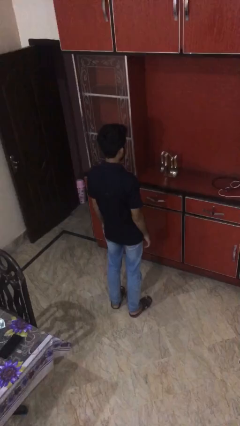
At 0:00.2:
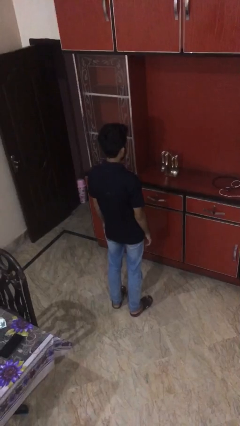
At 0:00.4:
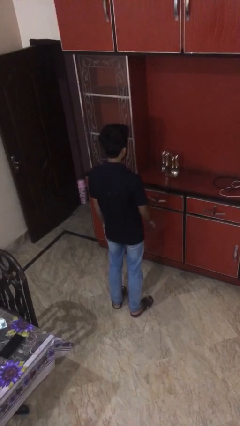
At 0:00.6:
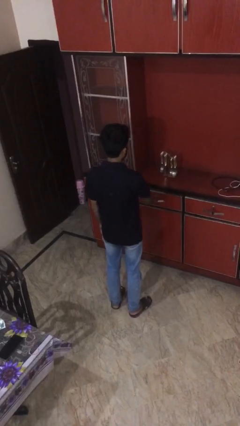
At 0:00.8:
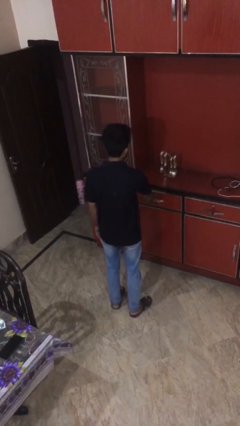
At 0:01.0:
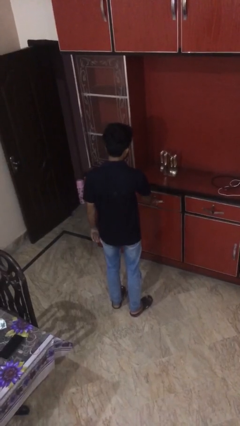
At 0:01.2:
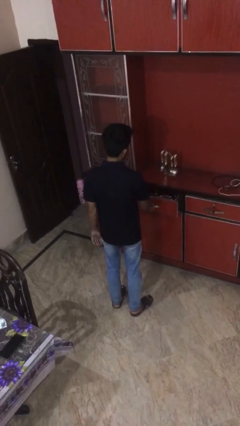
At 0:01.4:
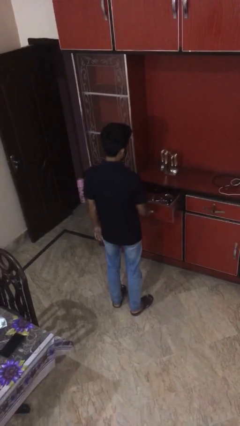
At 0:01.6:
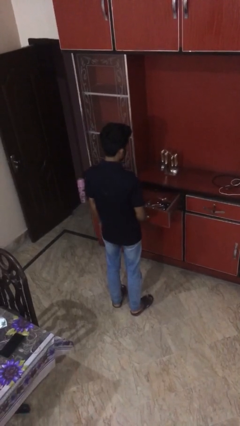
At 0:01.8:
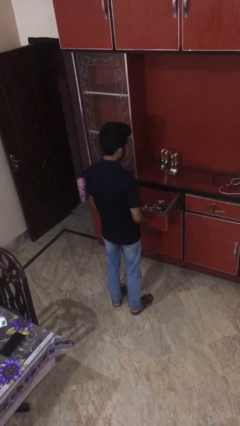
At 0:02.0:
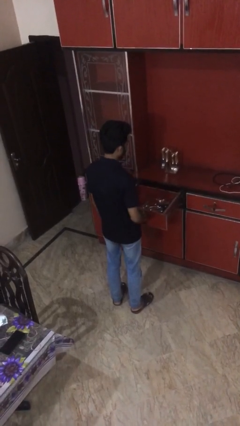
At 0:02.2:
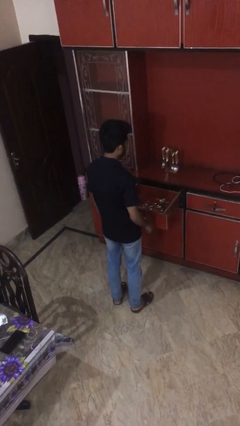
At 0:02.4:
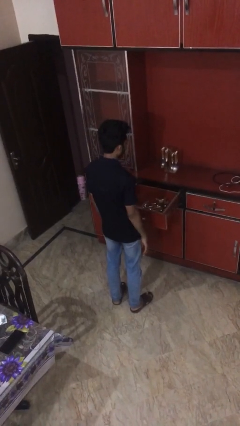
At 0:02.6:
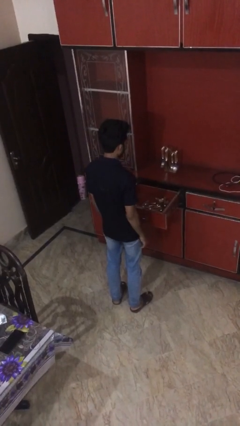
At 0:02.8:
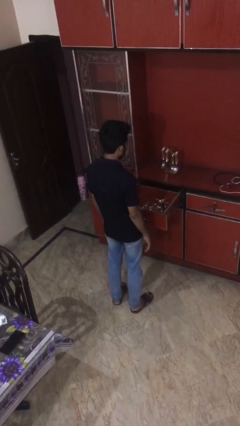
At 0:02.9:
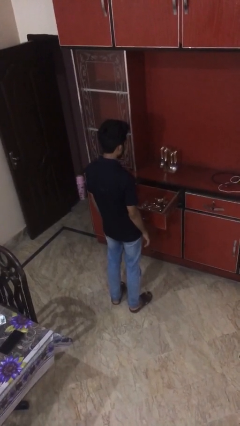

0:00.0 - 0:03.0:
person opens kitchen drawer

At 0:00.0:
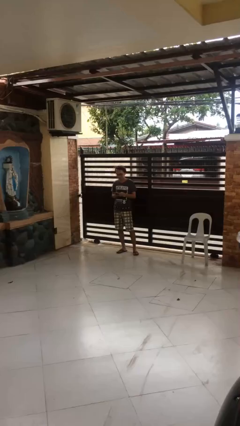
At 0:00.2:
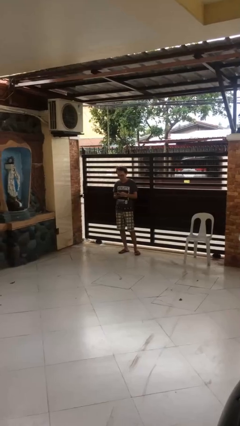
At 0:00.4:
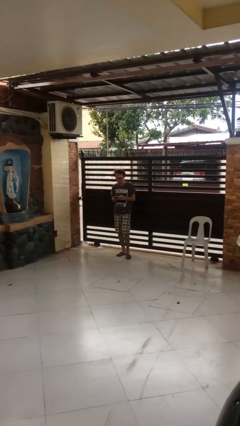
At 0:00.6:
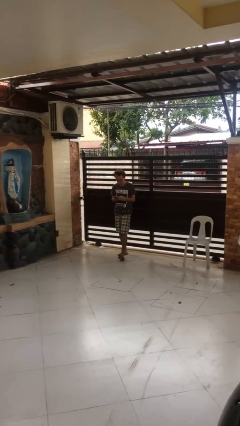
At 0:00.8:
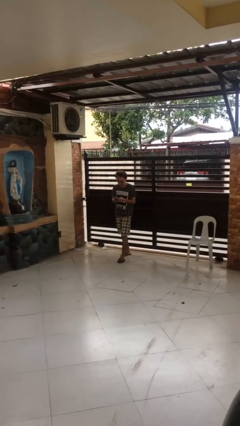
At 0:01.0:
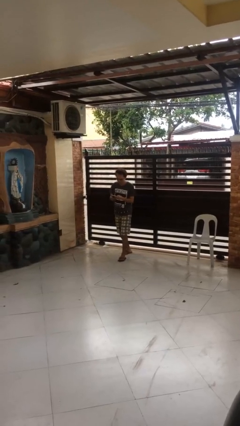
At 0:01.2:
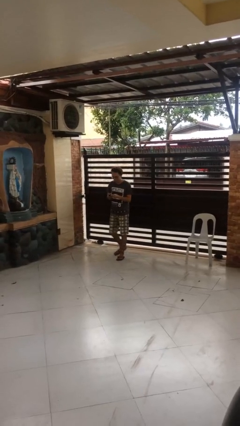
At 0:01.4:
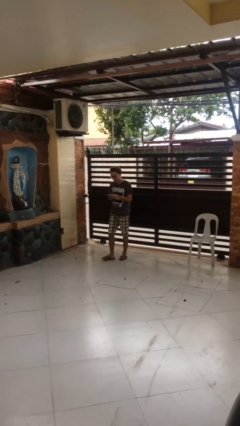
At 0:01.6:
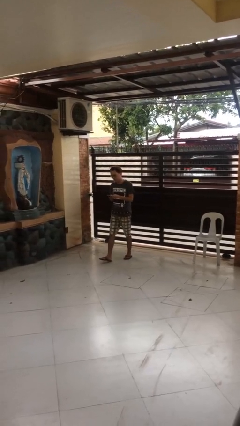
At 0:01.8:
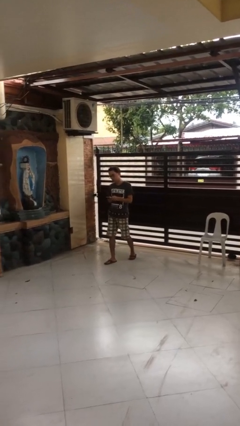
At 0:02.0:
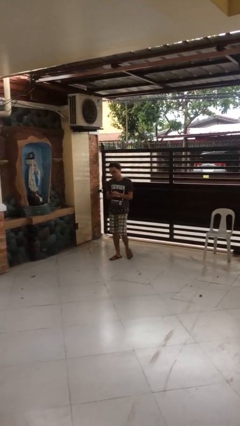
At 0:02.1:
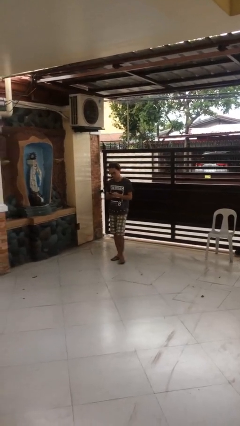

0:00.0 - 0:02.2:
person texts on phone

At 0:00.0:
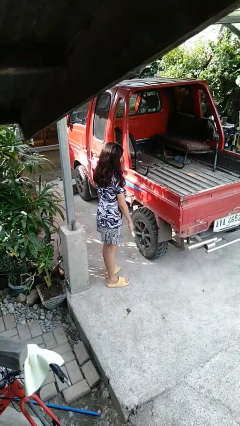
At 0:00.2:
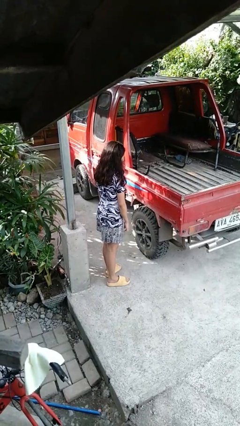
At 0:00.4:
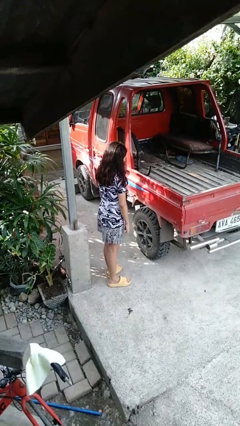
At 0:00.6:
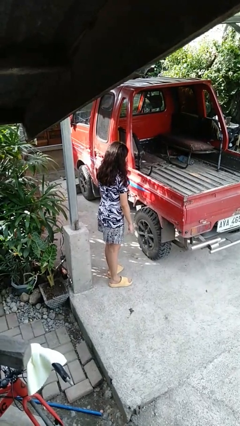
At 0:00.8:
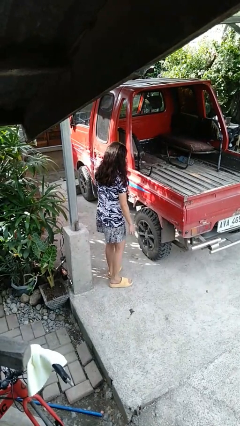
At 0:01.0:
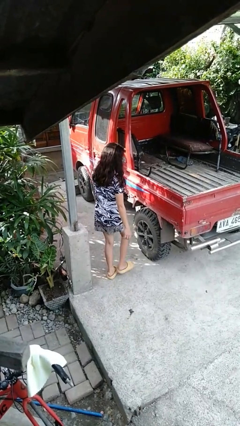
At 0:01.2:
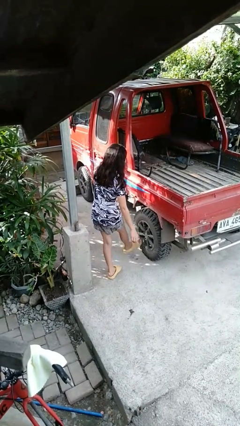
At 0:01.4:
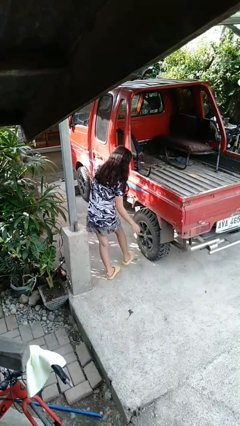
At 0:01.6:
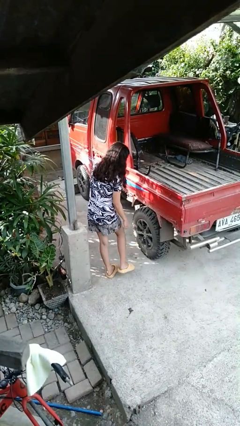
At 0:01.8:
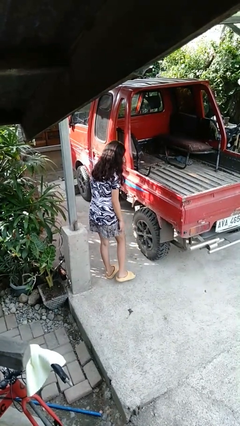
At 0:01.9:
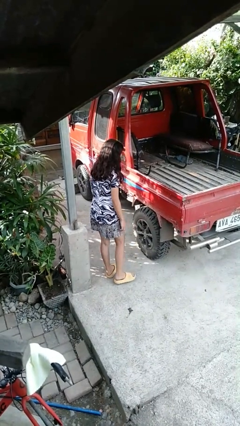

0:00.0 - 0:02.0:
person kicks car tires

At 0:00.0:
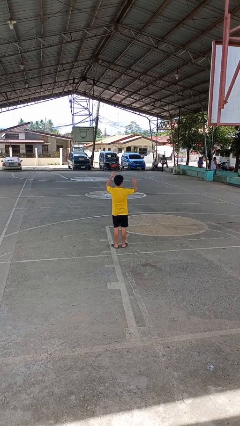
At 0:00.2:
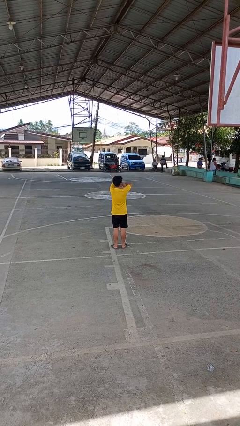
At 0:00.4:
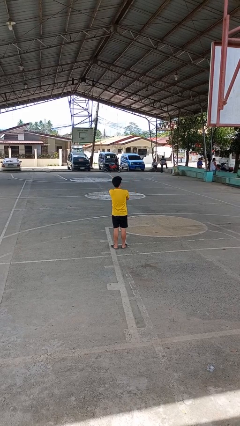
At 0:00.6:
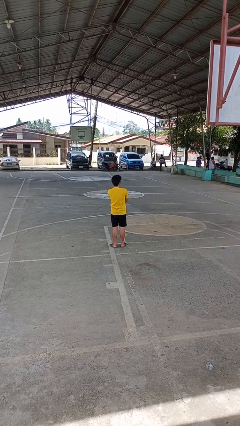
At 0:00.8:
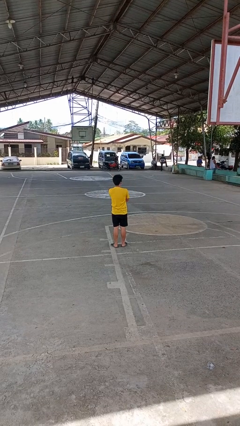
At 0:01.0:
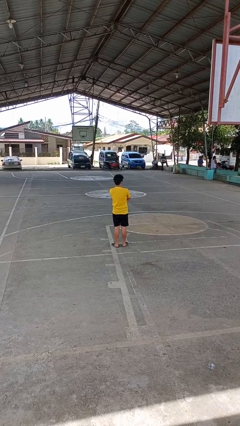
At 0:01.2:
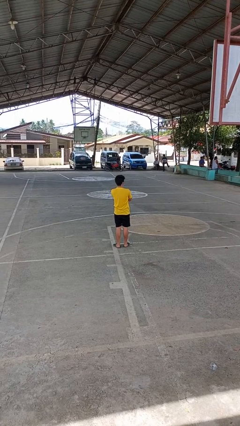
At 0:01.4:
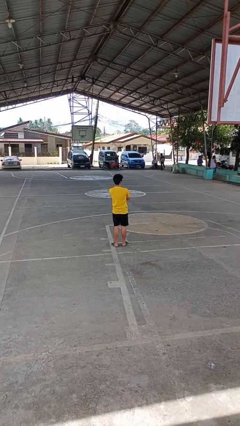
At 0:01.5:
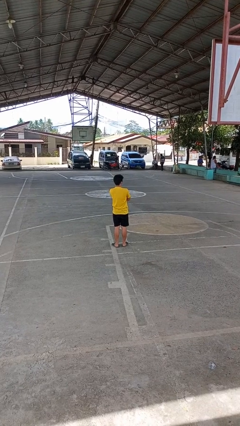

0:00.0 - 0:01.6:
person crosses arms

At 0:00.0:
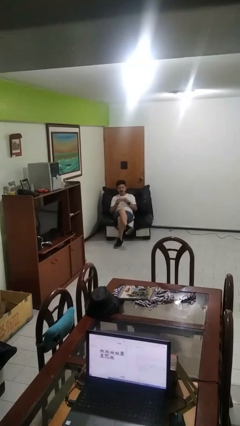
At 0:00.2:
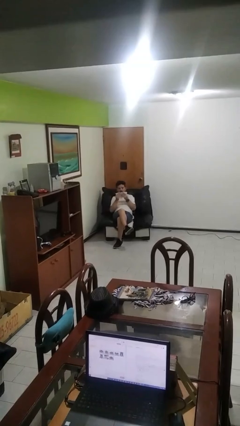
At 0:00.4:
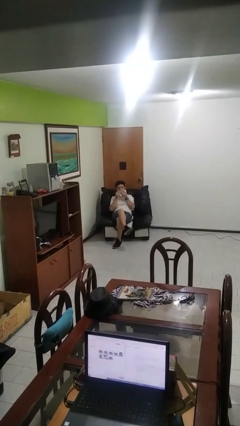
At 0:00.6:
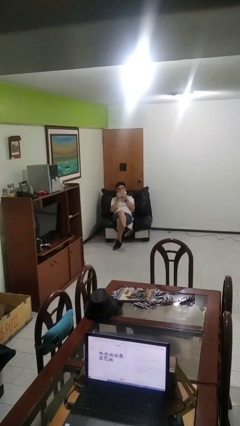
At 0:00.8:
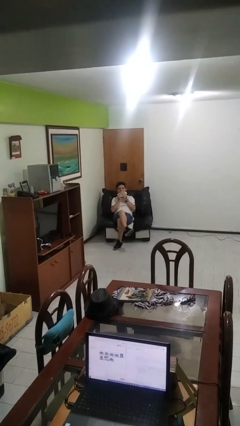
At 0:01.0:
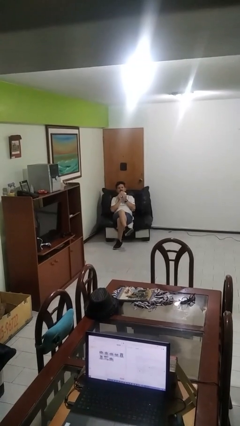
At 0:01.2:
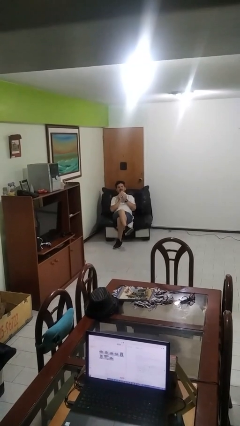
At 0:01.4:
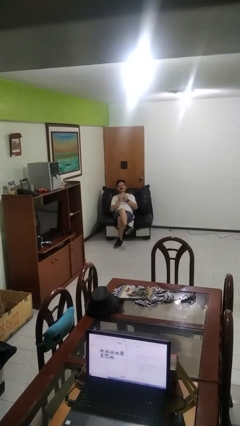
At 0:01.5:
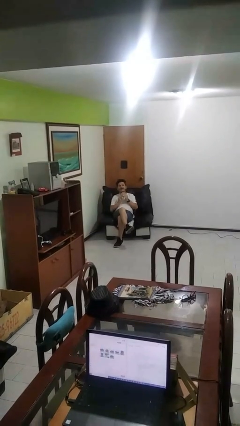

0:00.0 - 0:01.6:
person wipes mouth with napkin

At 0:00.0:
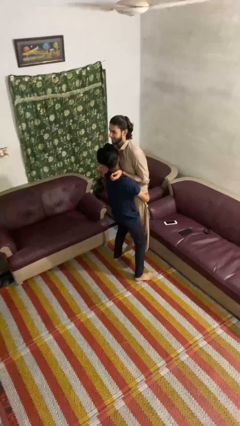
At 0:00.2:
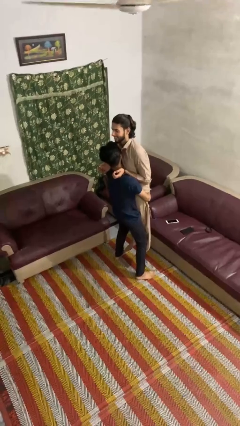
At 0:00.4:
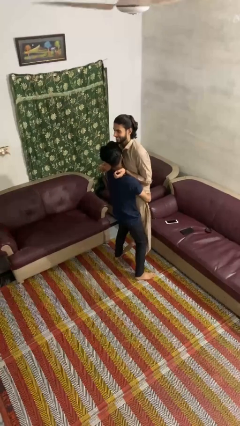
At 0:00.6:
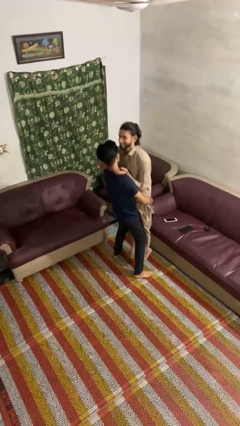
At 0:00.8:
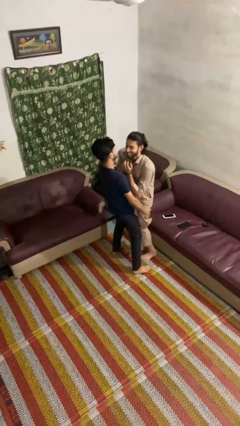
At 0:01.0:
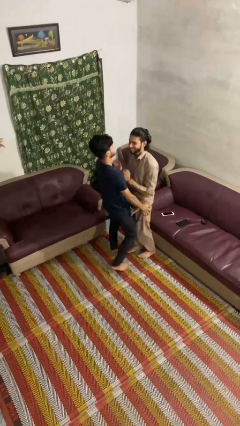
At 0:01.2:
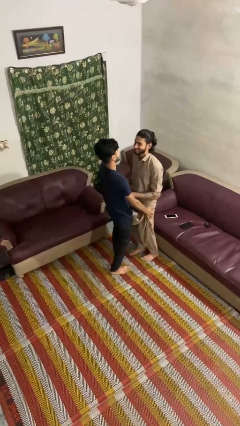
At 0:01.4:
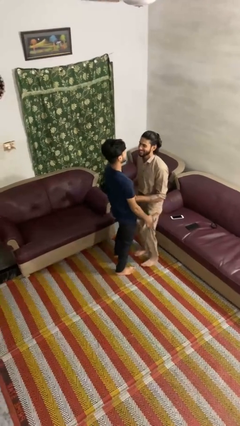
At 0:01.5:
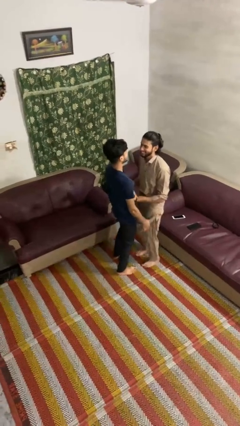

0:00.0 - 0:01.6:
person puts down person

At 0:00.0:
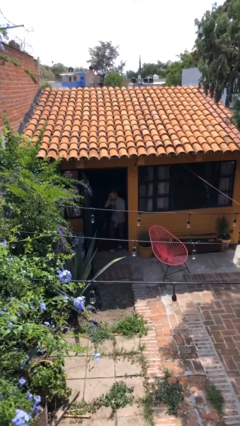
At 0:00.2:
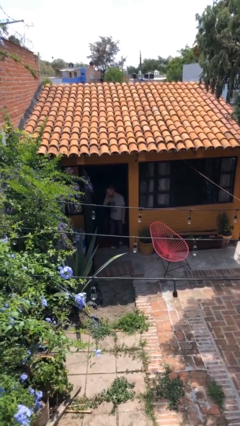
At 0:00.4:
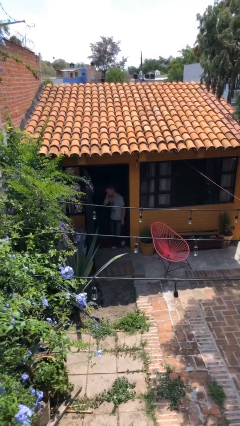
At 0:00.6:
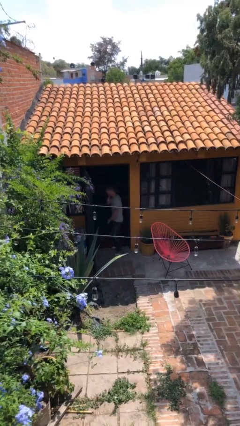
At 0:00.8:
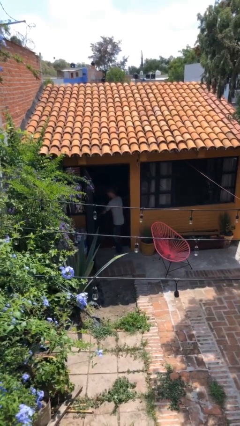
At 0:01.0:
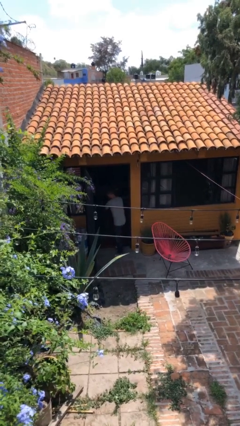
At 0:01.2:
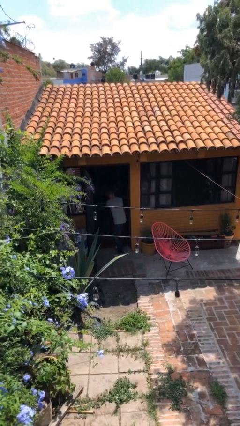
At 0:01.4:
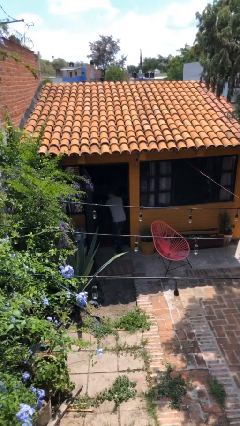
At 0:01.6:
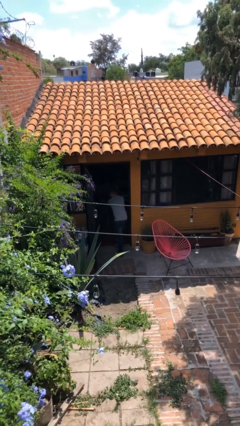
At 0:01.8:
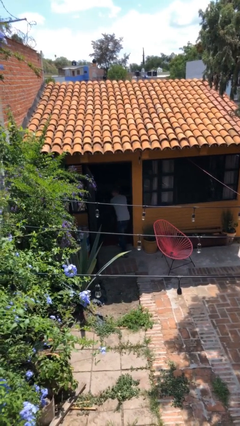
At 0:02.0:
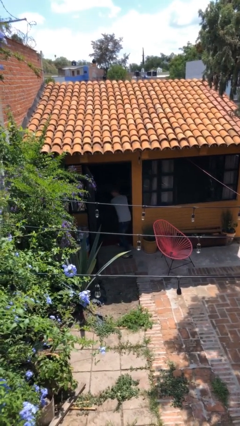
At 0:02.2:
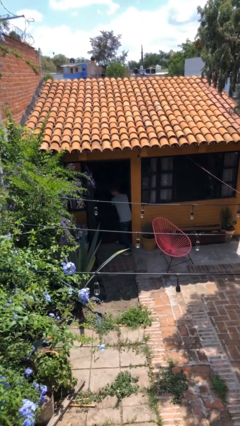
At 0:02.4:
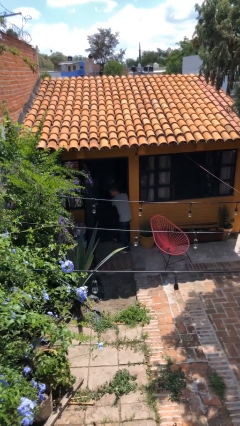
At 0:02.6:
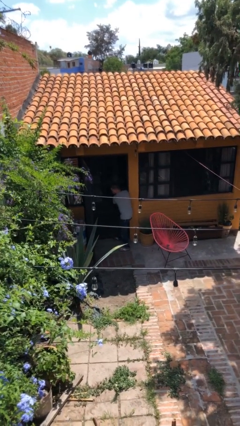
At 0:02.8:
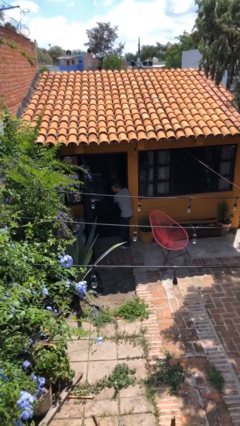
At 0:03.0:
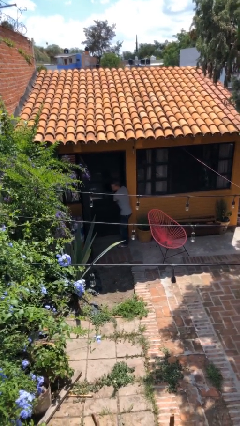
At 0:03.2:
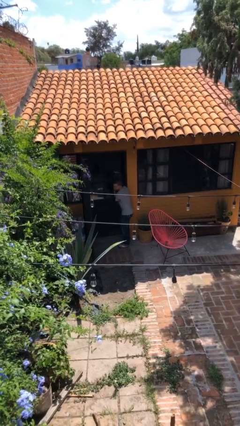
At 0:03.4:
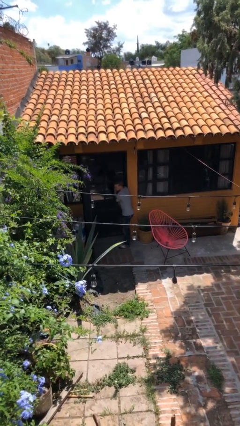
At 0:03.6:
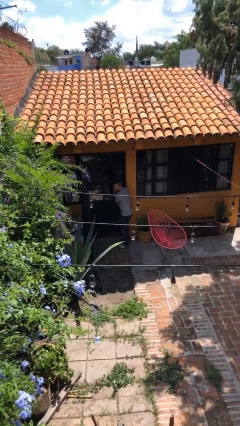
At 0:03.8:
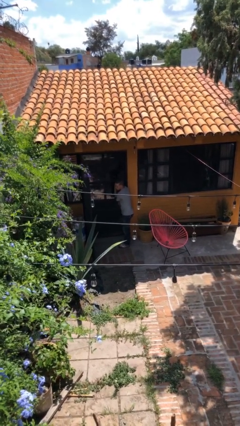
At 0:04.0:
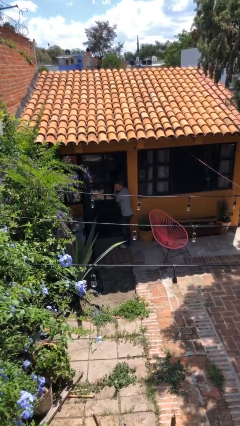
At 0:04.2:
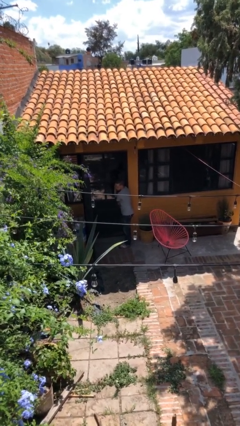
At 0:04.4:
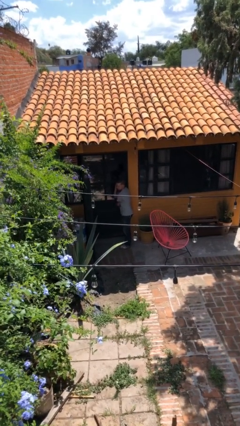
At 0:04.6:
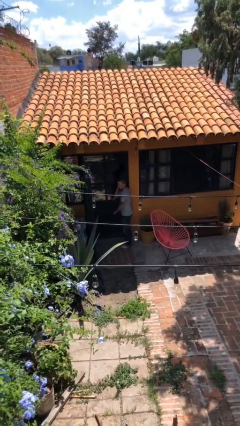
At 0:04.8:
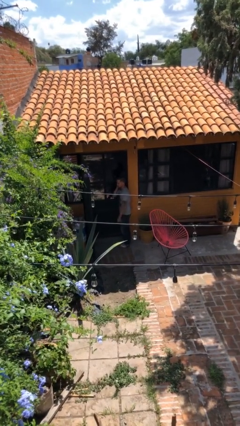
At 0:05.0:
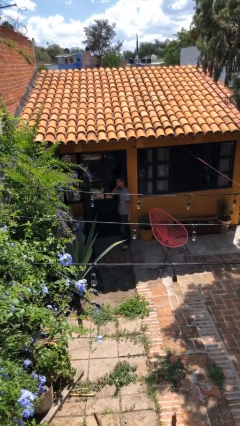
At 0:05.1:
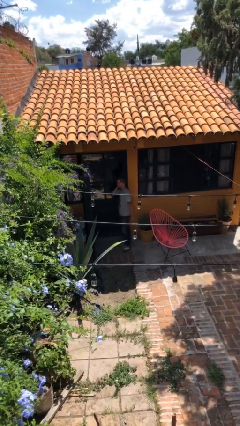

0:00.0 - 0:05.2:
person closes facility door
